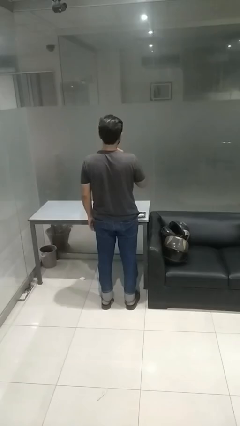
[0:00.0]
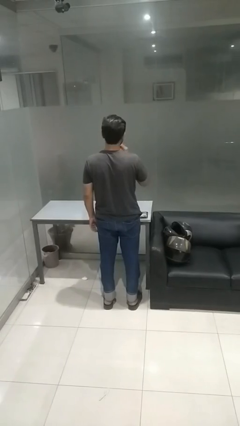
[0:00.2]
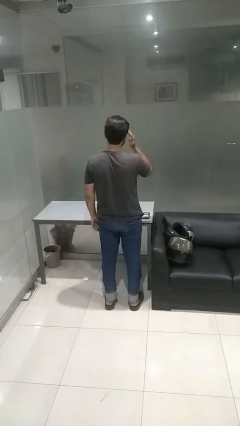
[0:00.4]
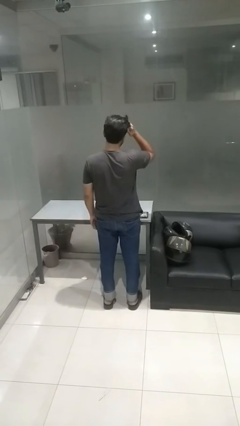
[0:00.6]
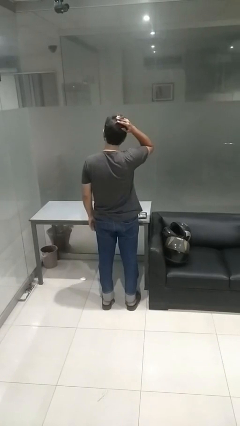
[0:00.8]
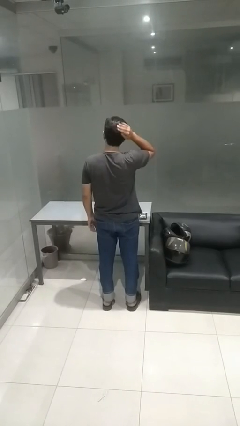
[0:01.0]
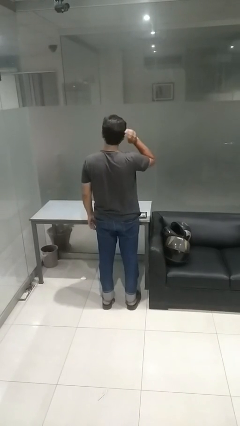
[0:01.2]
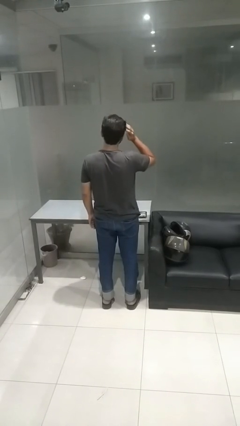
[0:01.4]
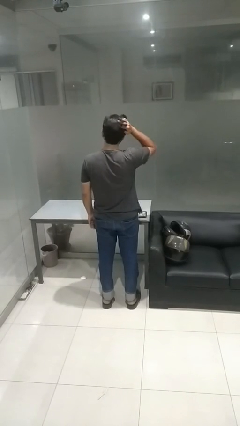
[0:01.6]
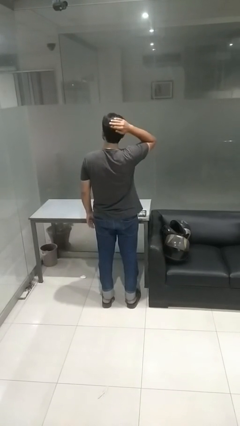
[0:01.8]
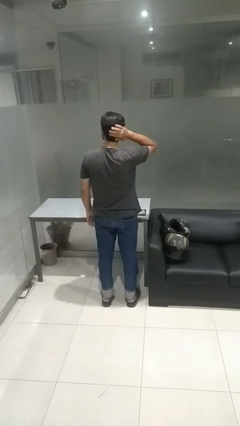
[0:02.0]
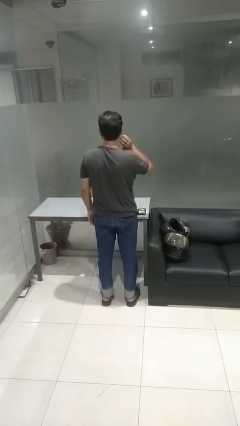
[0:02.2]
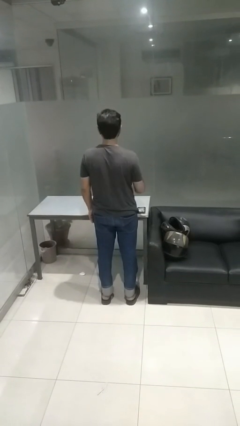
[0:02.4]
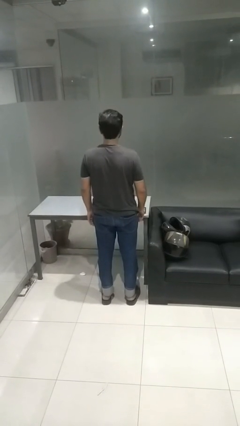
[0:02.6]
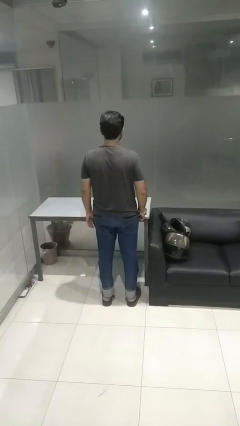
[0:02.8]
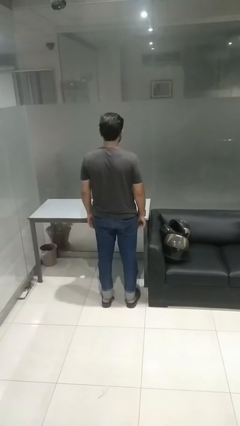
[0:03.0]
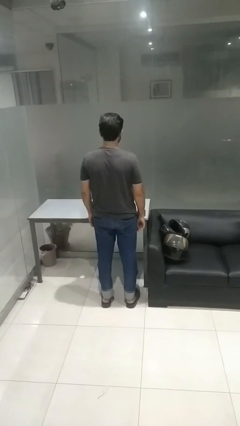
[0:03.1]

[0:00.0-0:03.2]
person strokes hair

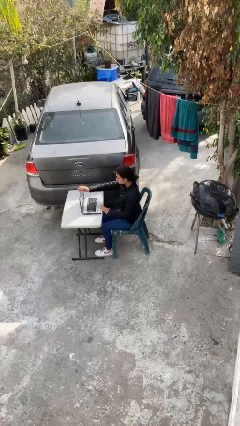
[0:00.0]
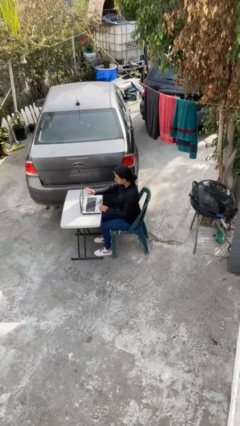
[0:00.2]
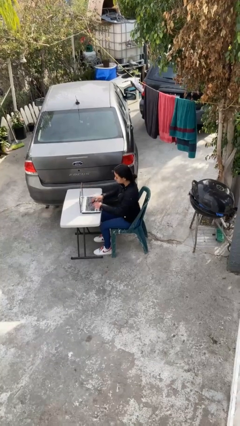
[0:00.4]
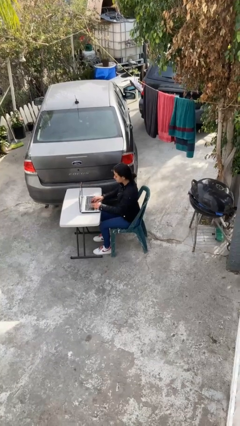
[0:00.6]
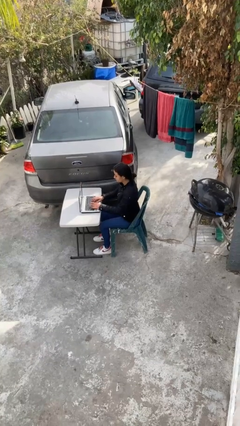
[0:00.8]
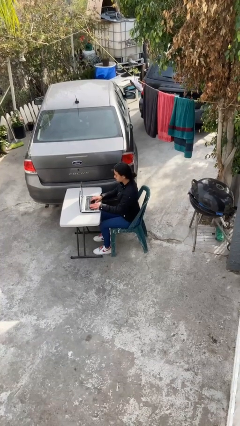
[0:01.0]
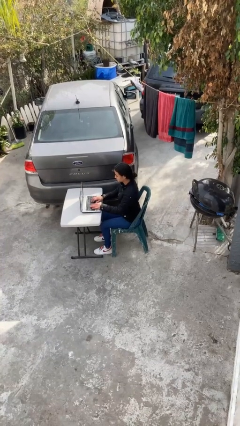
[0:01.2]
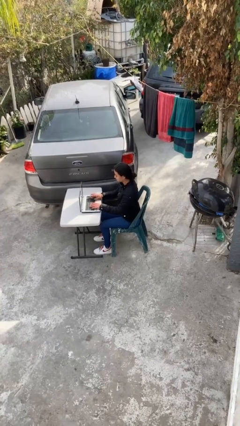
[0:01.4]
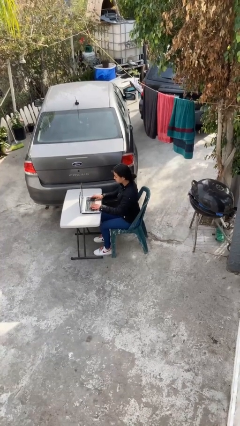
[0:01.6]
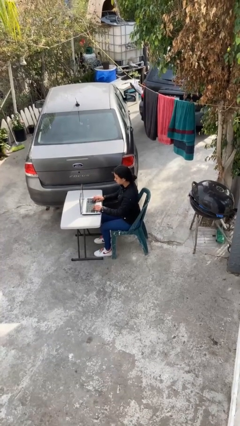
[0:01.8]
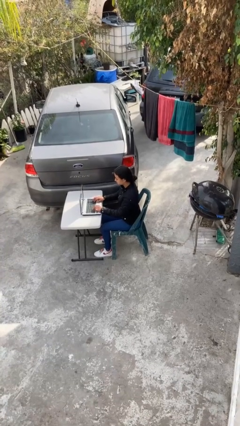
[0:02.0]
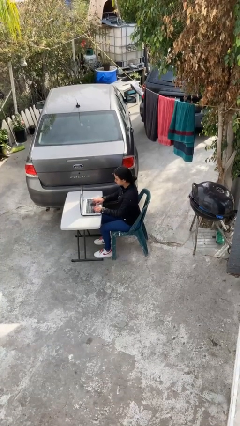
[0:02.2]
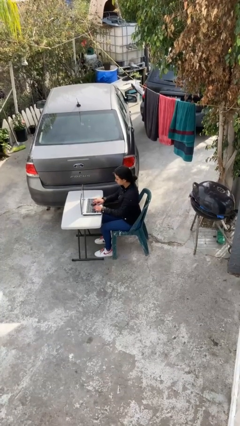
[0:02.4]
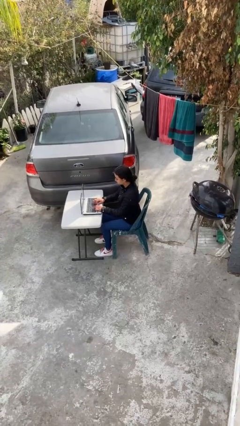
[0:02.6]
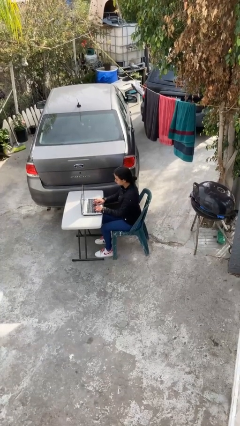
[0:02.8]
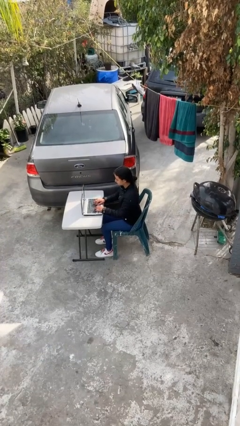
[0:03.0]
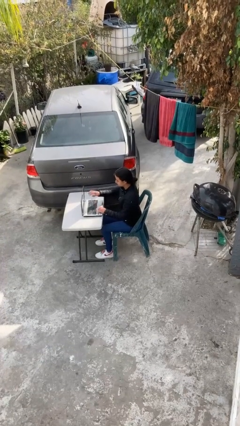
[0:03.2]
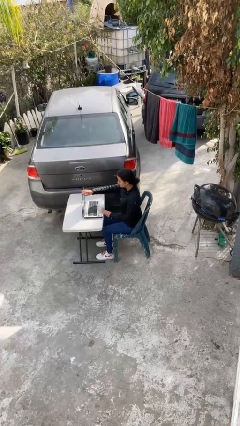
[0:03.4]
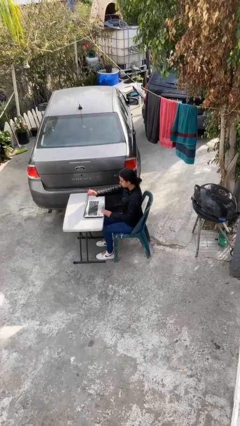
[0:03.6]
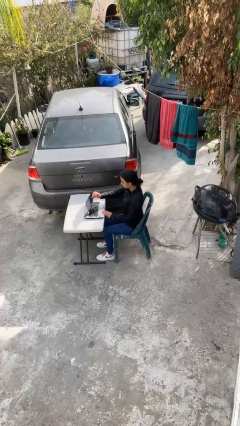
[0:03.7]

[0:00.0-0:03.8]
person interacts with laptop

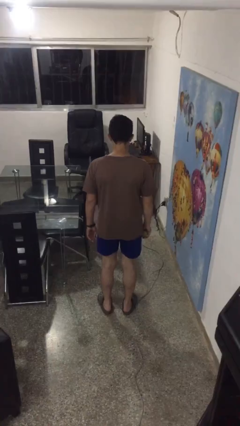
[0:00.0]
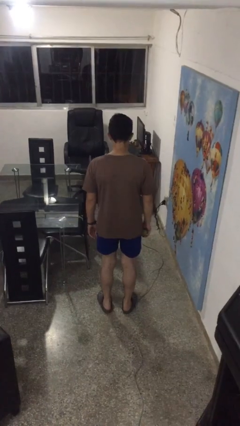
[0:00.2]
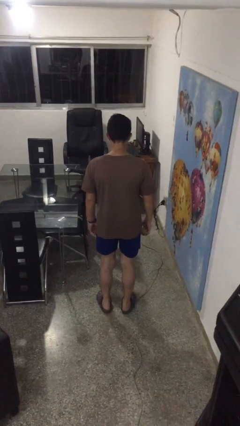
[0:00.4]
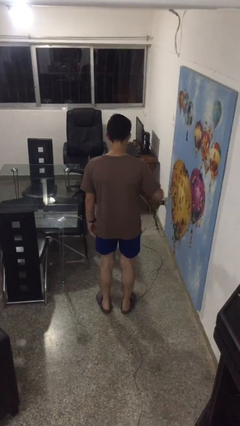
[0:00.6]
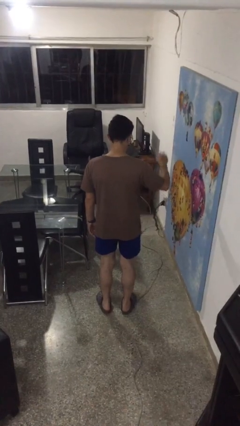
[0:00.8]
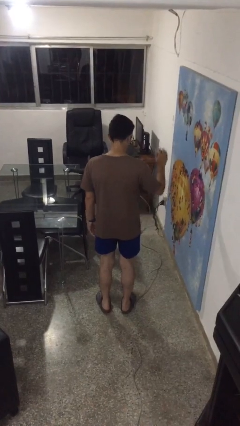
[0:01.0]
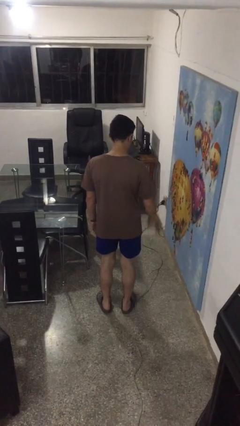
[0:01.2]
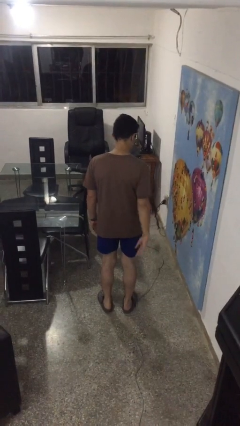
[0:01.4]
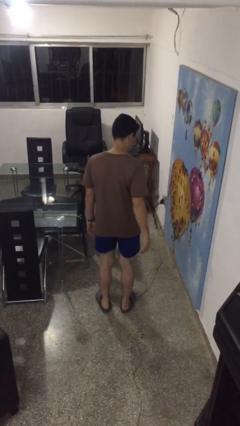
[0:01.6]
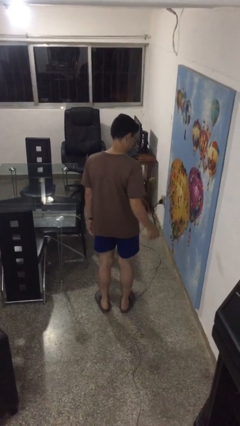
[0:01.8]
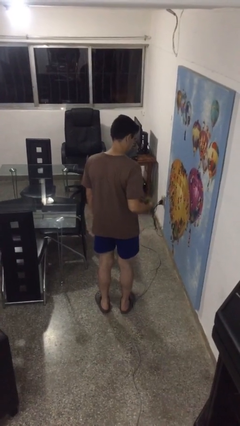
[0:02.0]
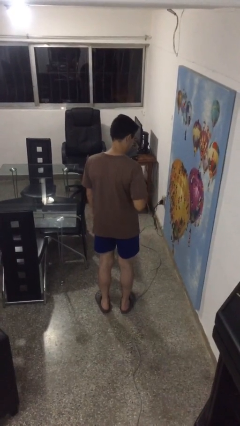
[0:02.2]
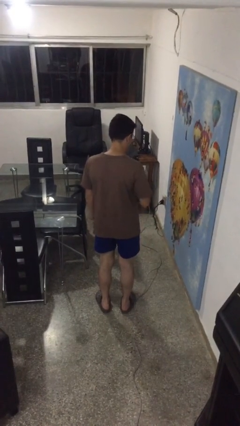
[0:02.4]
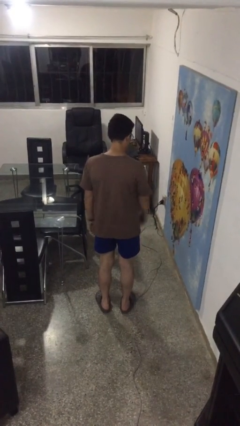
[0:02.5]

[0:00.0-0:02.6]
person bounces ball on floor

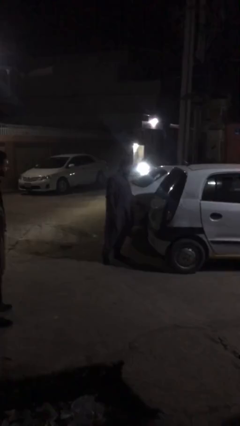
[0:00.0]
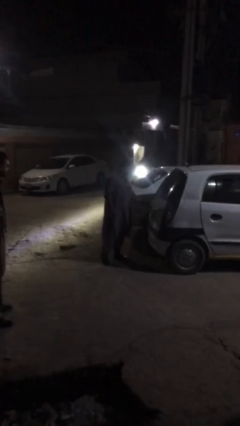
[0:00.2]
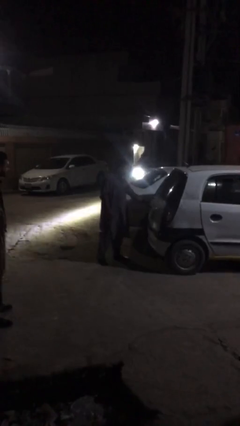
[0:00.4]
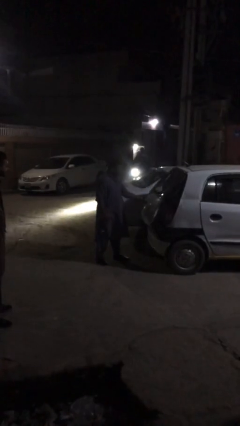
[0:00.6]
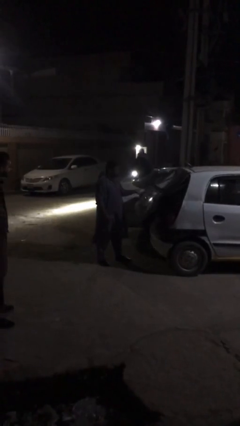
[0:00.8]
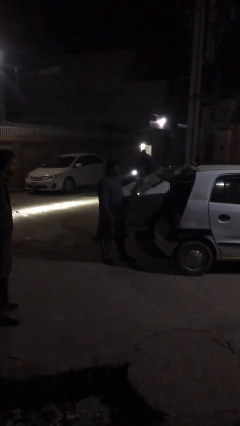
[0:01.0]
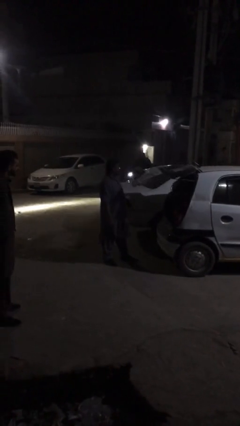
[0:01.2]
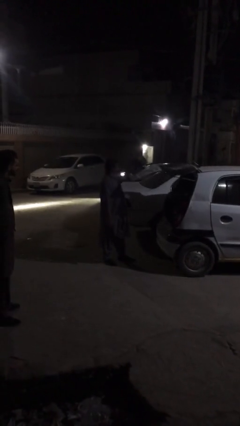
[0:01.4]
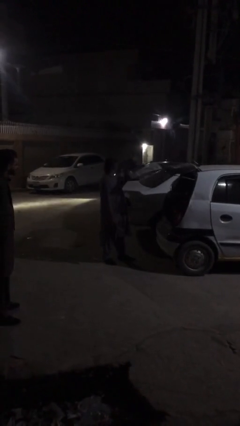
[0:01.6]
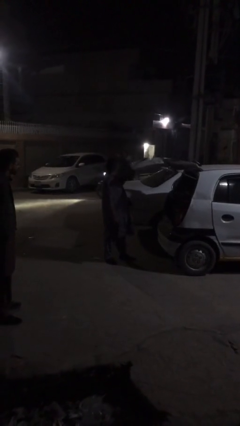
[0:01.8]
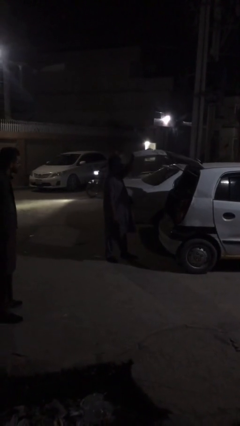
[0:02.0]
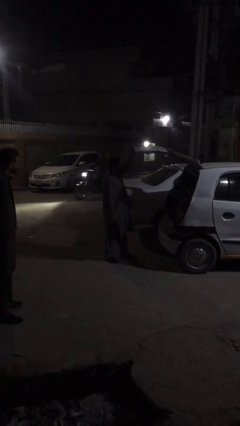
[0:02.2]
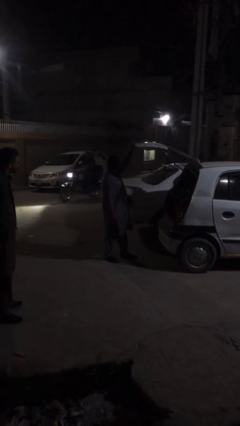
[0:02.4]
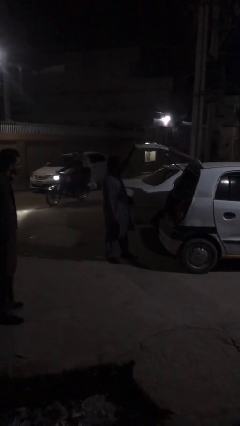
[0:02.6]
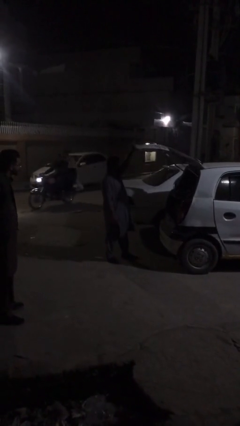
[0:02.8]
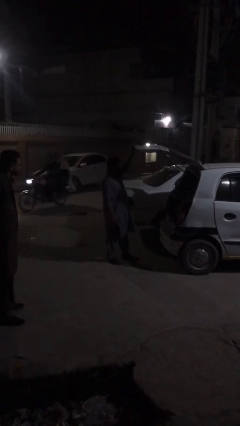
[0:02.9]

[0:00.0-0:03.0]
person opens car trunk

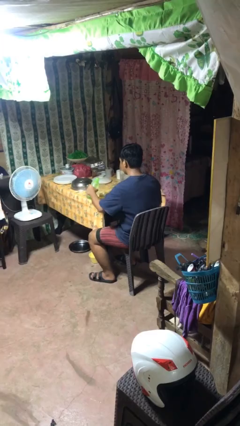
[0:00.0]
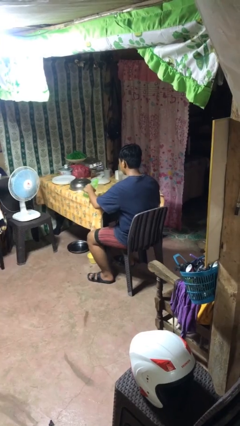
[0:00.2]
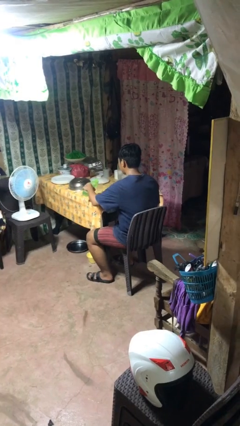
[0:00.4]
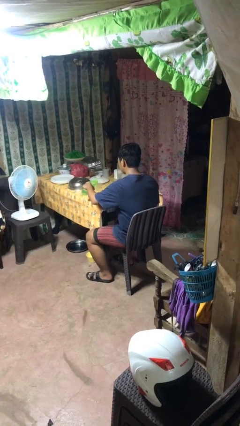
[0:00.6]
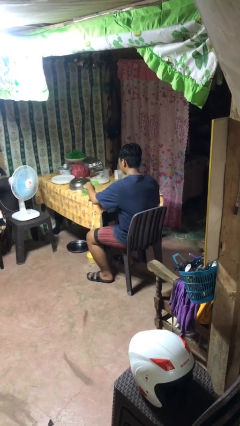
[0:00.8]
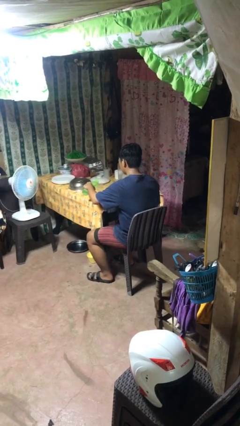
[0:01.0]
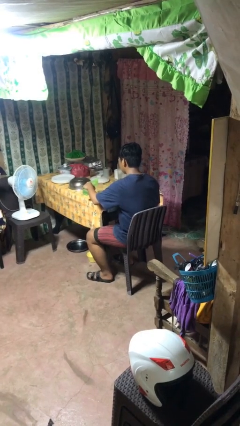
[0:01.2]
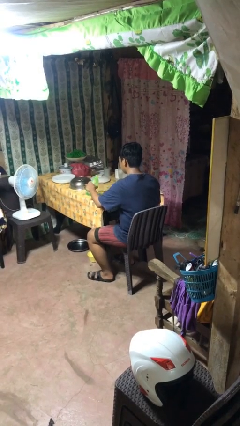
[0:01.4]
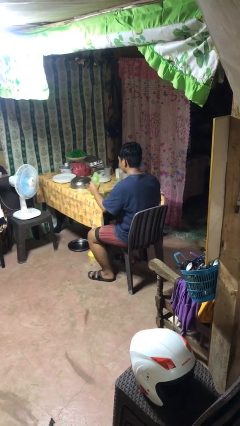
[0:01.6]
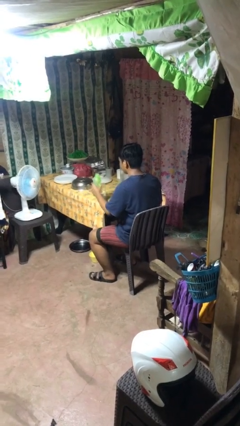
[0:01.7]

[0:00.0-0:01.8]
person pours liquid into cup

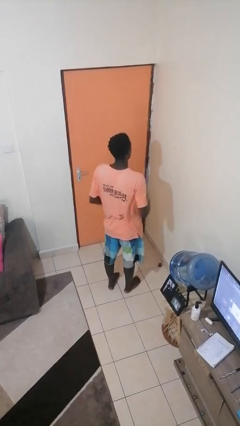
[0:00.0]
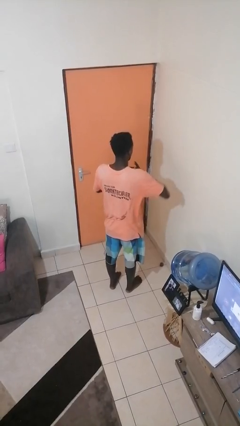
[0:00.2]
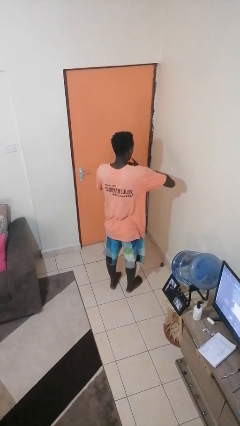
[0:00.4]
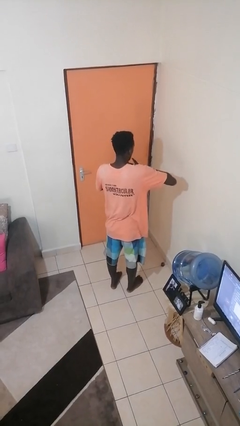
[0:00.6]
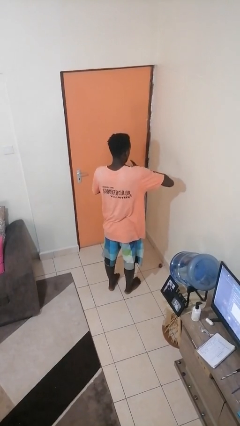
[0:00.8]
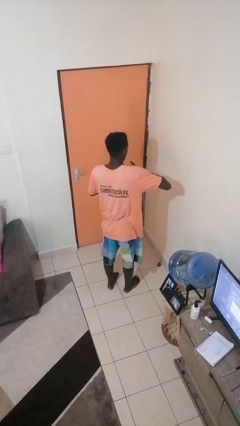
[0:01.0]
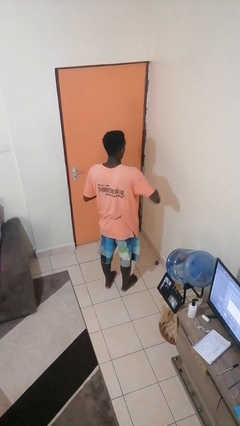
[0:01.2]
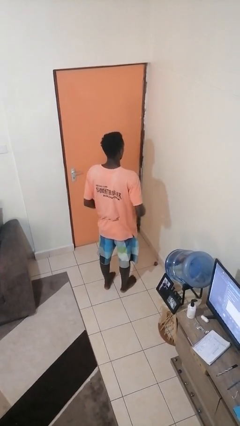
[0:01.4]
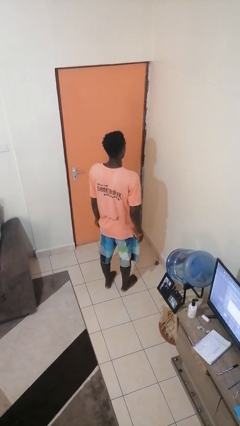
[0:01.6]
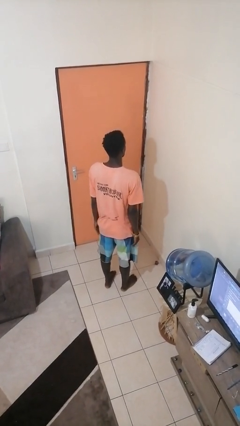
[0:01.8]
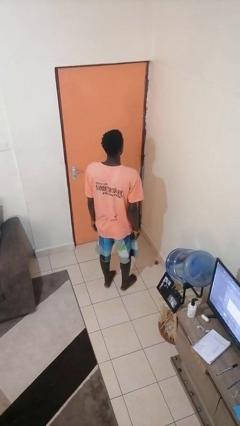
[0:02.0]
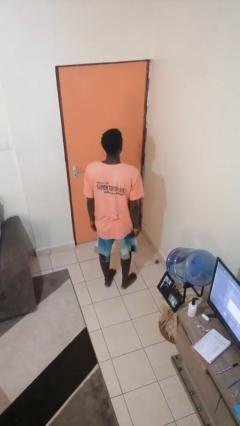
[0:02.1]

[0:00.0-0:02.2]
person takes off ring

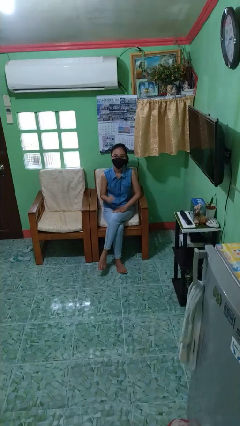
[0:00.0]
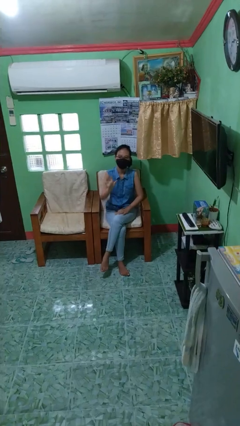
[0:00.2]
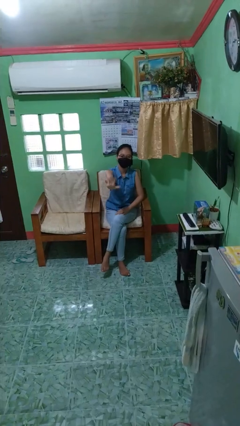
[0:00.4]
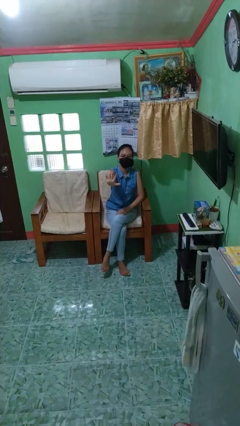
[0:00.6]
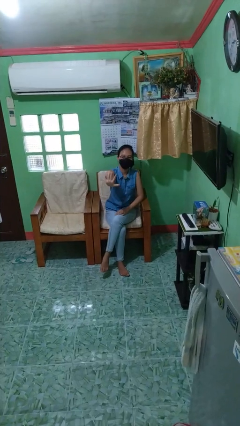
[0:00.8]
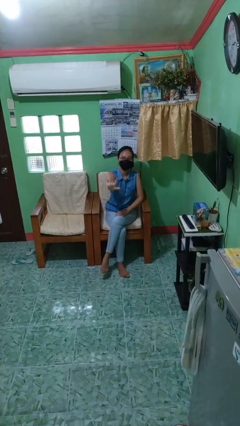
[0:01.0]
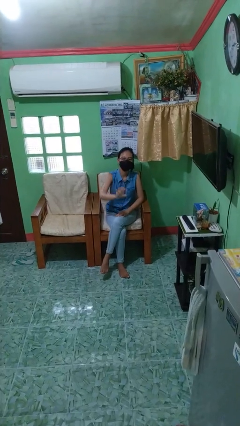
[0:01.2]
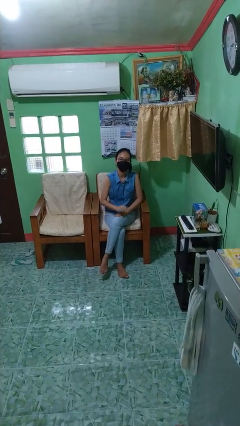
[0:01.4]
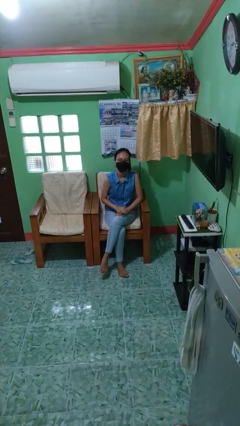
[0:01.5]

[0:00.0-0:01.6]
person gestures stop
